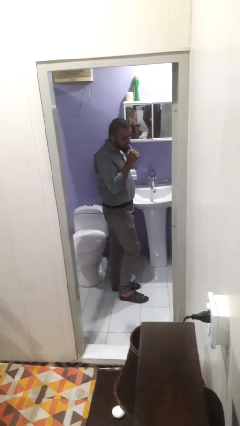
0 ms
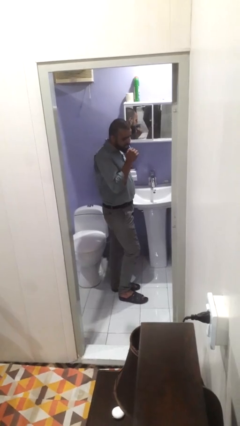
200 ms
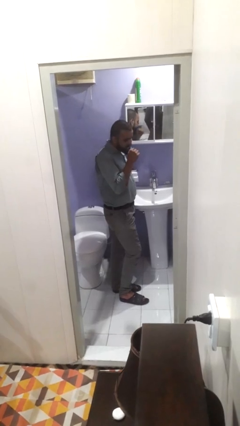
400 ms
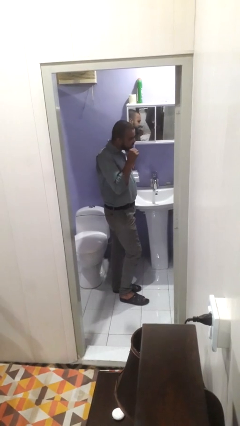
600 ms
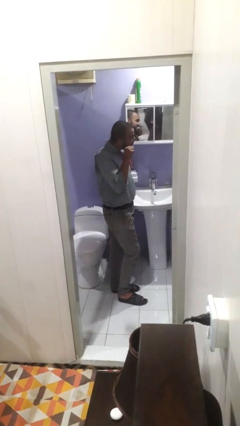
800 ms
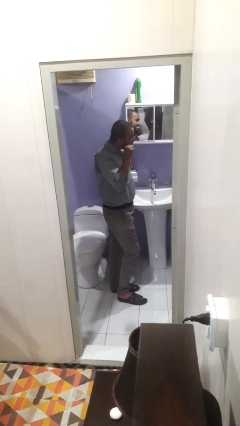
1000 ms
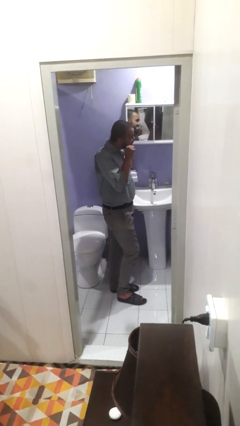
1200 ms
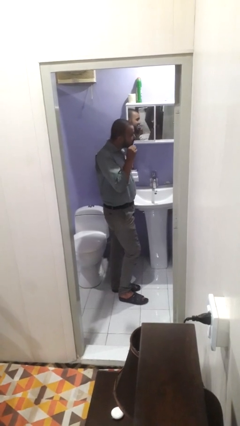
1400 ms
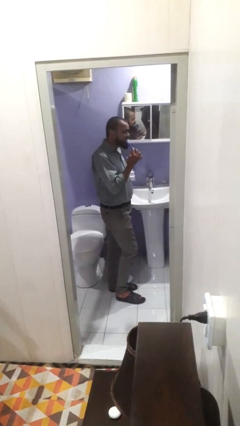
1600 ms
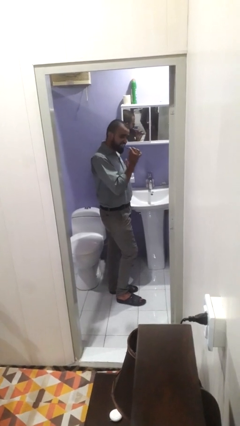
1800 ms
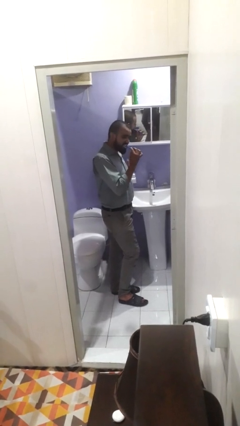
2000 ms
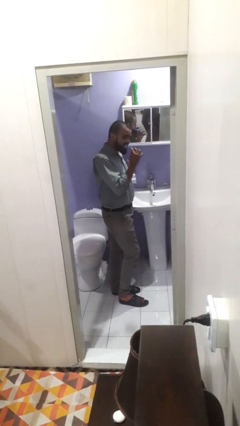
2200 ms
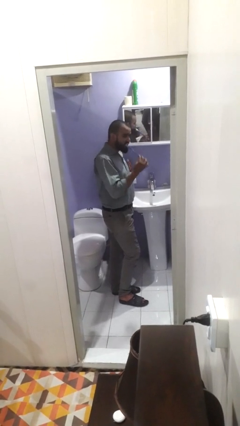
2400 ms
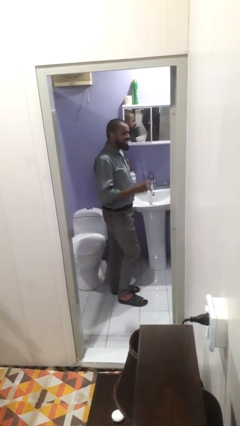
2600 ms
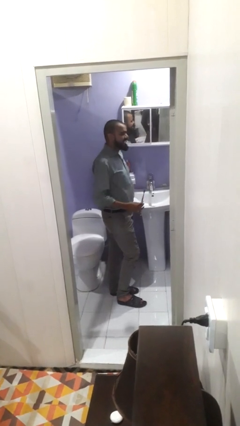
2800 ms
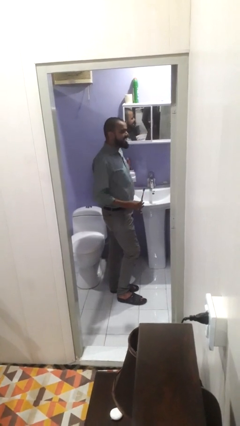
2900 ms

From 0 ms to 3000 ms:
person brushes teeth

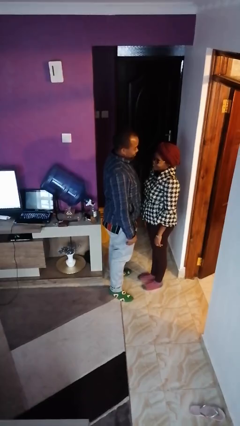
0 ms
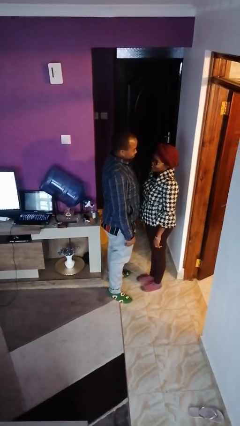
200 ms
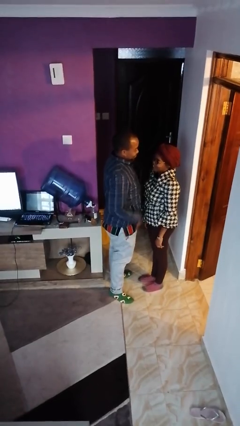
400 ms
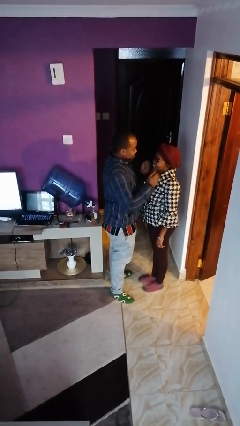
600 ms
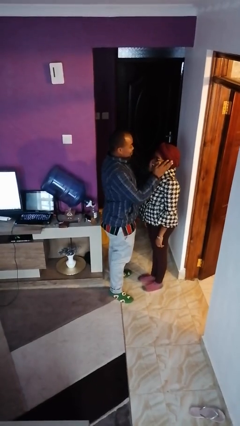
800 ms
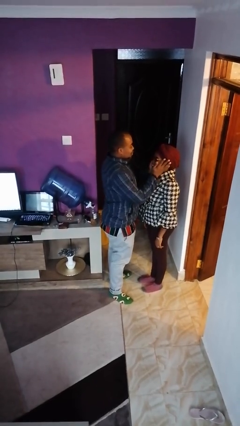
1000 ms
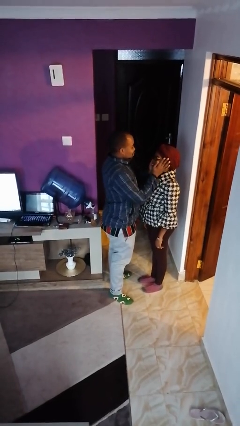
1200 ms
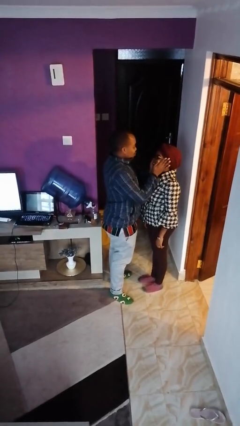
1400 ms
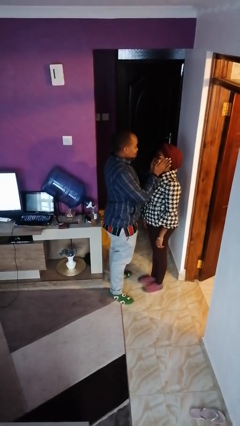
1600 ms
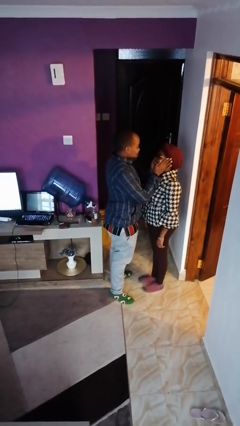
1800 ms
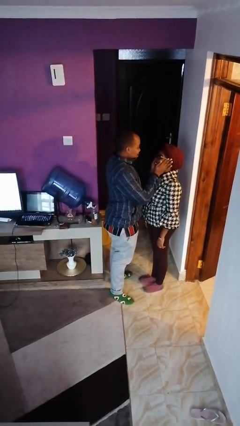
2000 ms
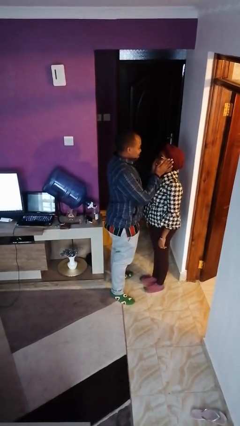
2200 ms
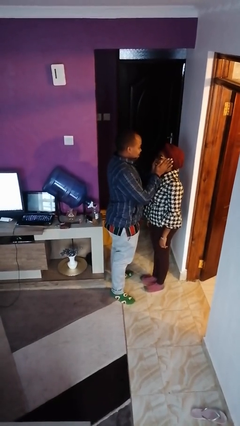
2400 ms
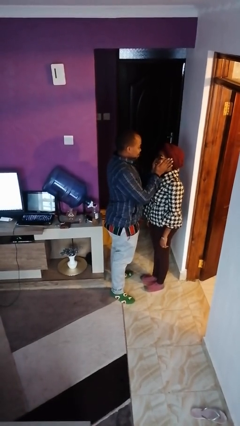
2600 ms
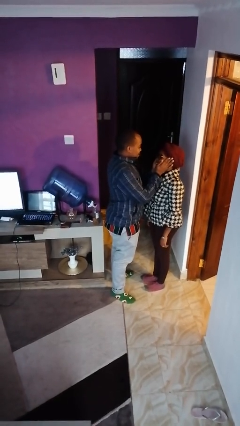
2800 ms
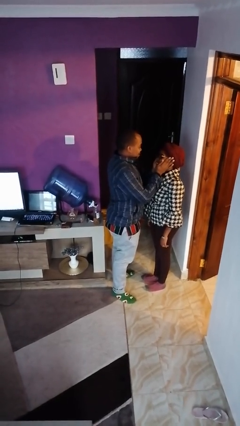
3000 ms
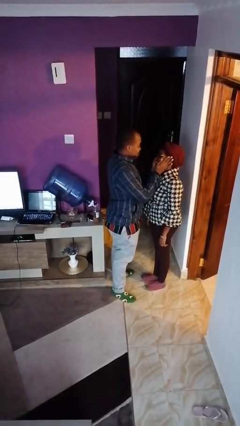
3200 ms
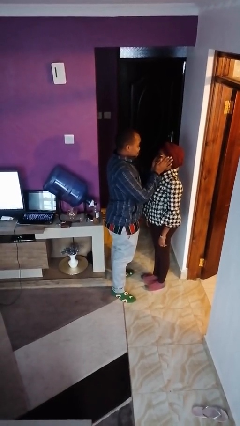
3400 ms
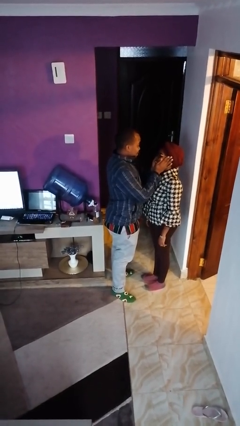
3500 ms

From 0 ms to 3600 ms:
person touches face of person

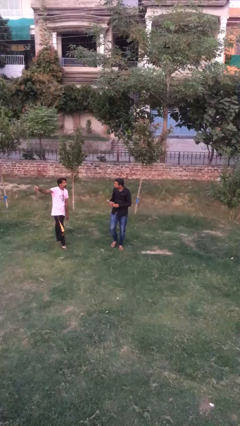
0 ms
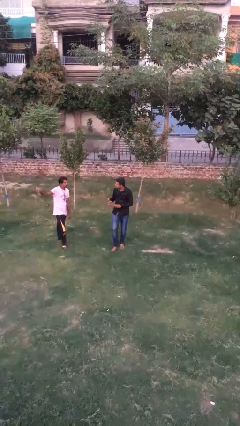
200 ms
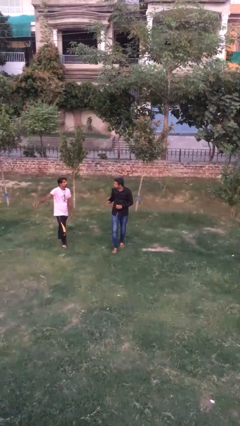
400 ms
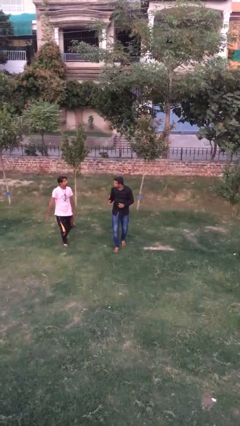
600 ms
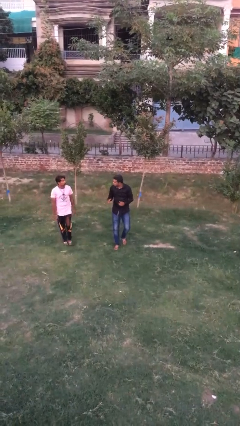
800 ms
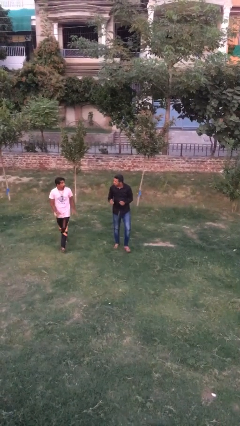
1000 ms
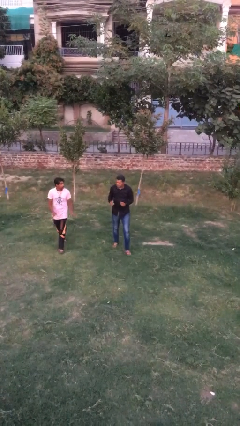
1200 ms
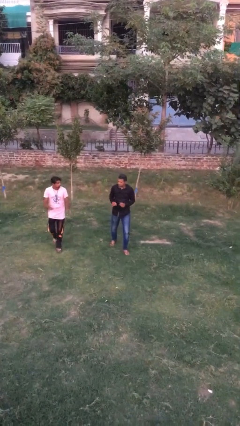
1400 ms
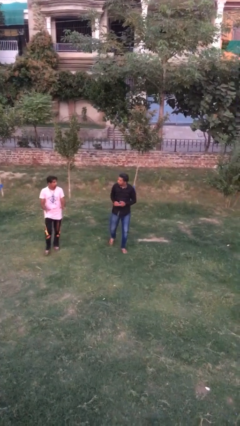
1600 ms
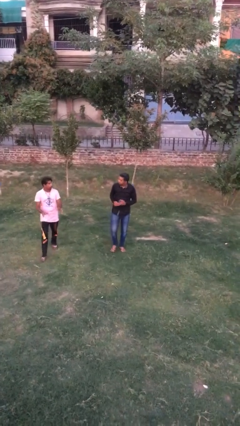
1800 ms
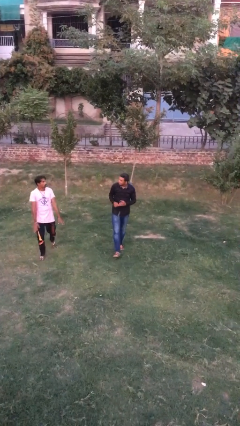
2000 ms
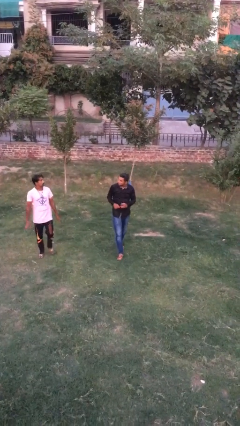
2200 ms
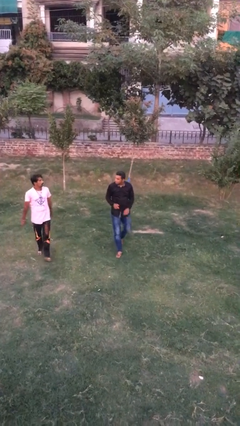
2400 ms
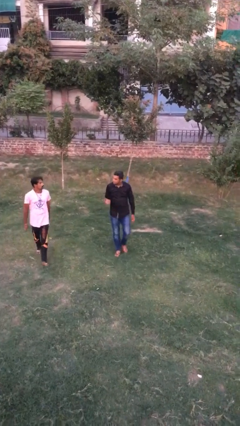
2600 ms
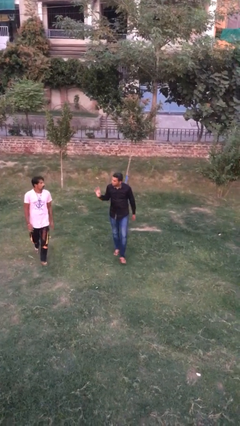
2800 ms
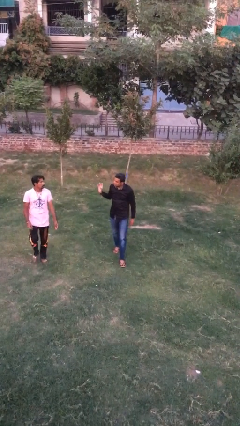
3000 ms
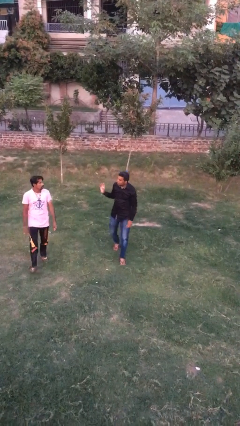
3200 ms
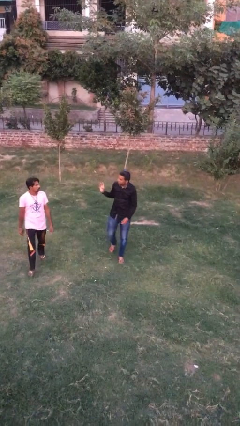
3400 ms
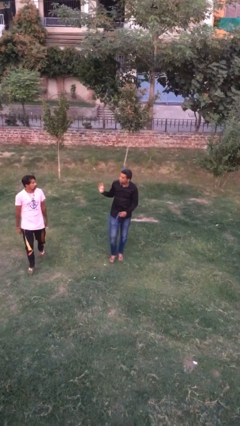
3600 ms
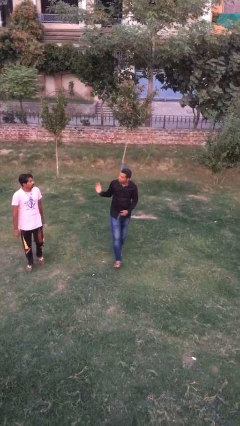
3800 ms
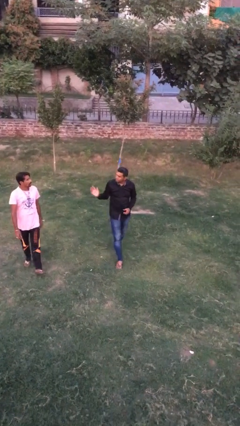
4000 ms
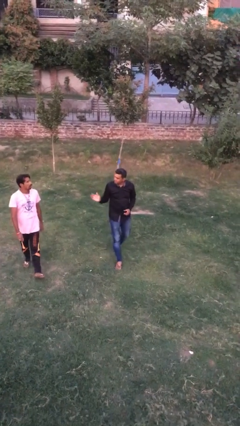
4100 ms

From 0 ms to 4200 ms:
person talks to person

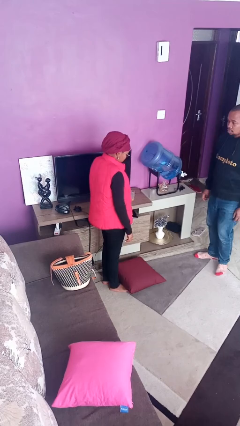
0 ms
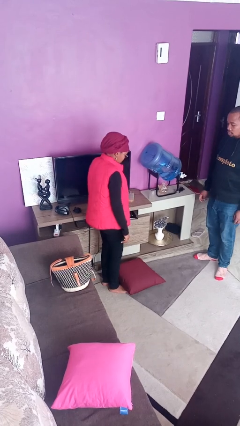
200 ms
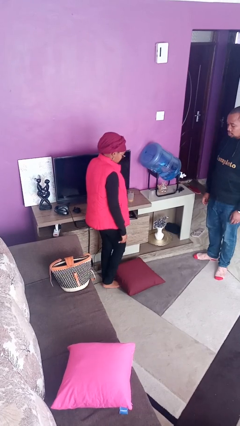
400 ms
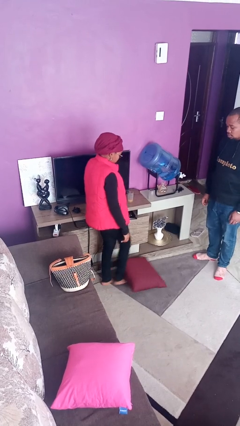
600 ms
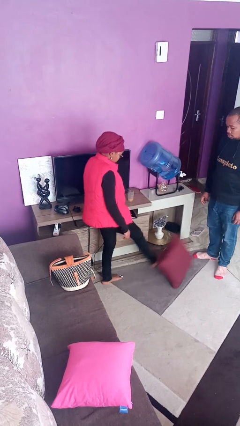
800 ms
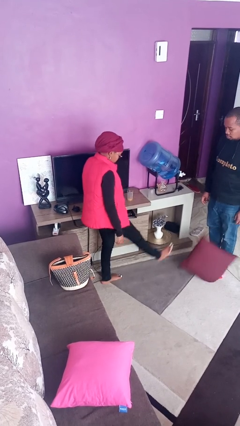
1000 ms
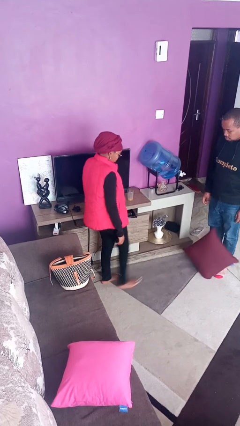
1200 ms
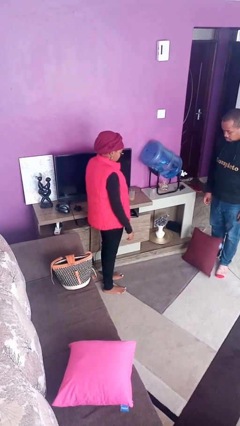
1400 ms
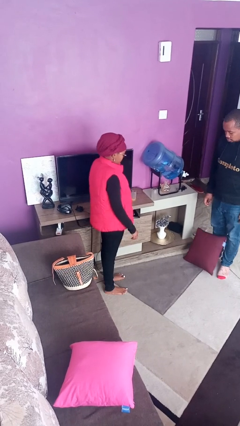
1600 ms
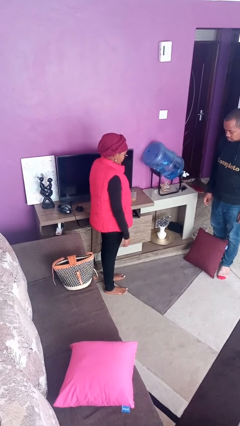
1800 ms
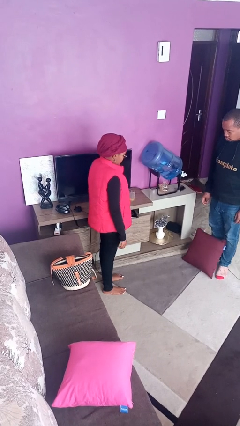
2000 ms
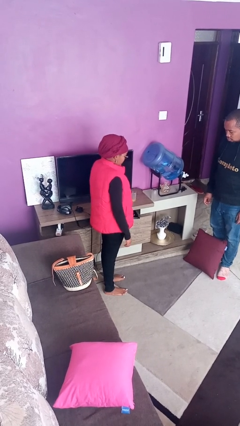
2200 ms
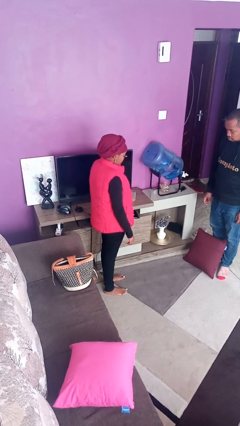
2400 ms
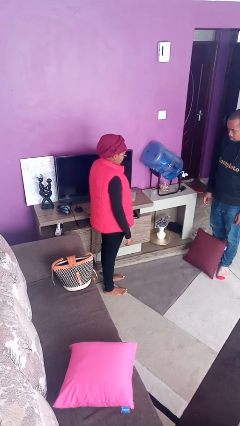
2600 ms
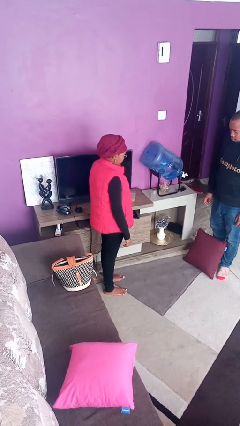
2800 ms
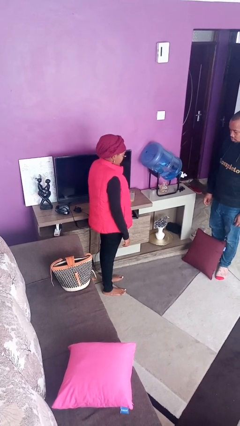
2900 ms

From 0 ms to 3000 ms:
person kicks object to person

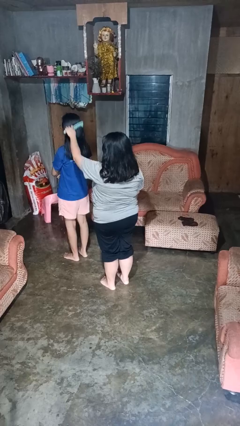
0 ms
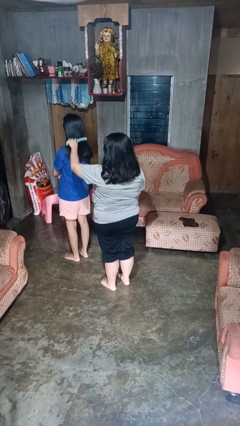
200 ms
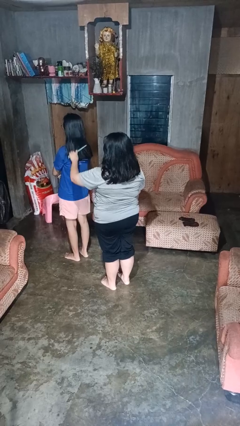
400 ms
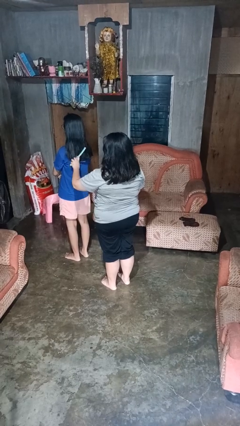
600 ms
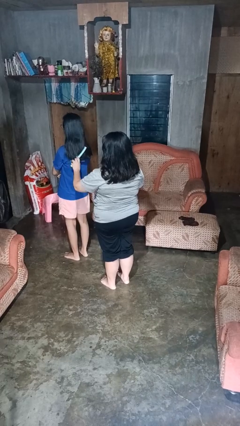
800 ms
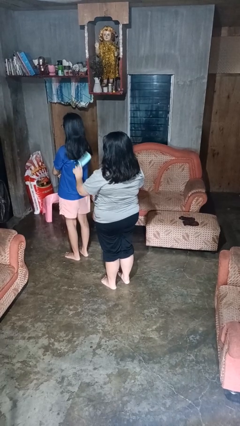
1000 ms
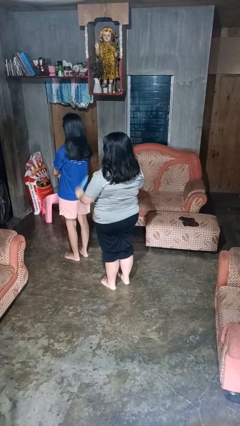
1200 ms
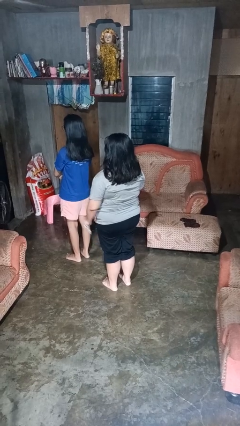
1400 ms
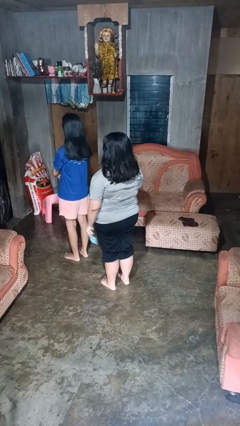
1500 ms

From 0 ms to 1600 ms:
person brushes hair of person

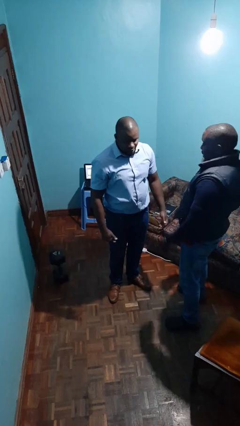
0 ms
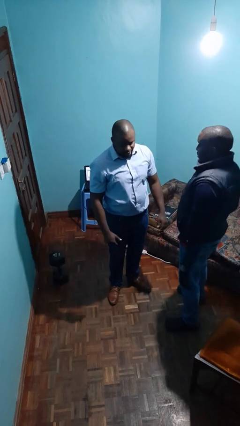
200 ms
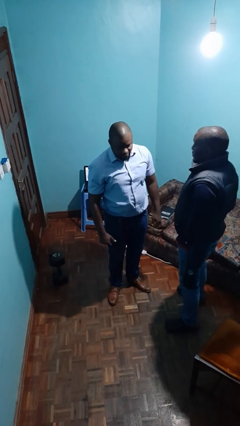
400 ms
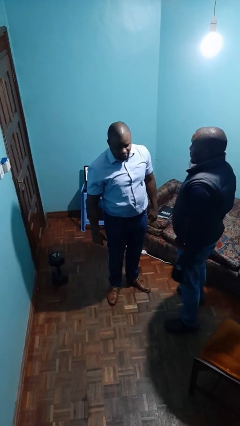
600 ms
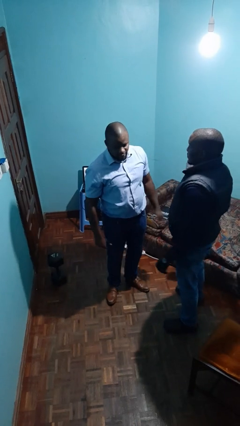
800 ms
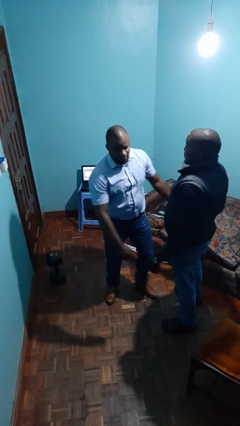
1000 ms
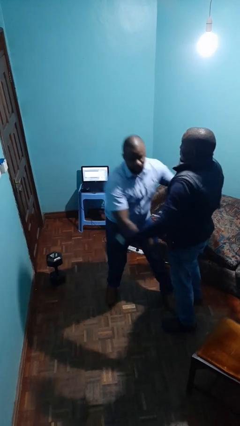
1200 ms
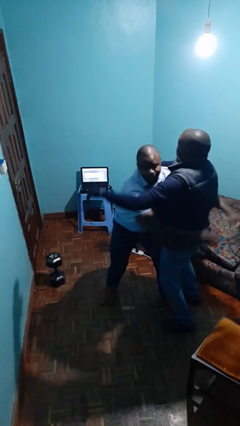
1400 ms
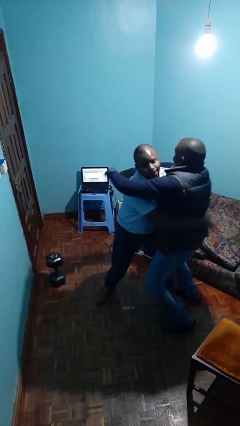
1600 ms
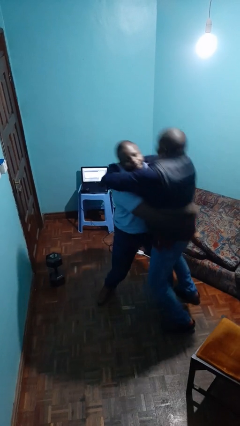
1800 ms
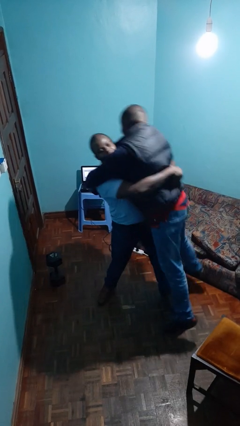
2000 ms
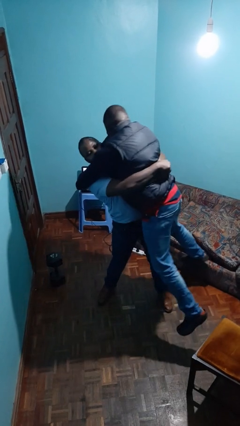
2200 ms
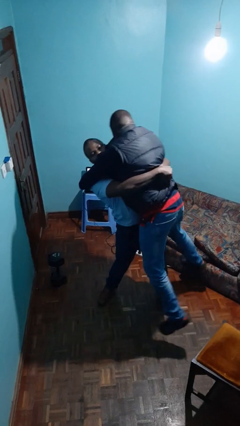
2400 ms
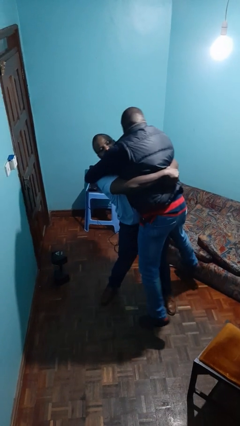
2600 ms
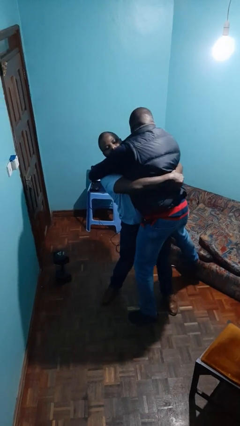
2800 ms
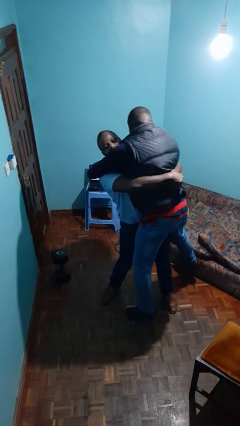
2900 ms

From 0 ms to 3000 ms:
person picks up person
